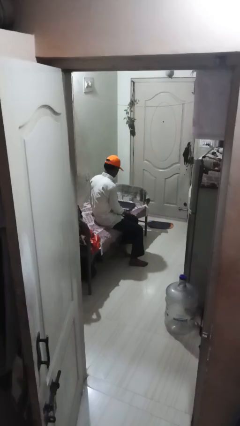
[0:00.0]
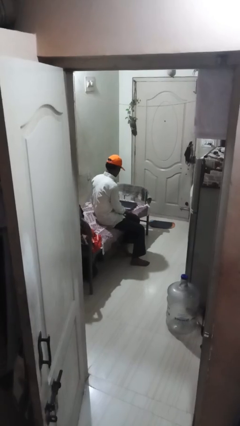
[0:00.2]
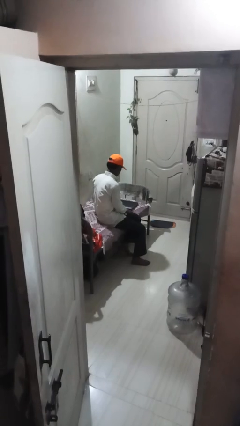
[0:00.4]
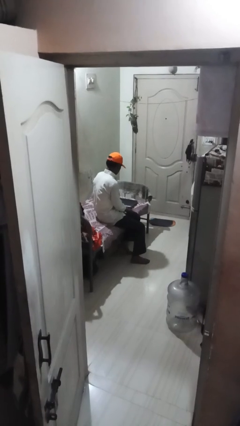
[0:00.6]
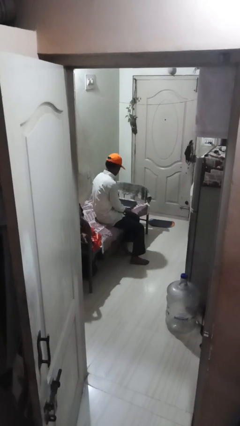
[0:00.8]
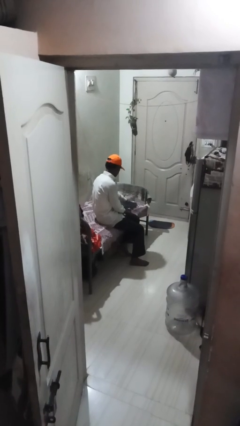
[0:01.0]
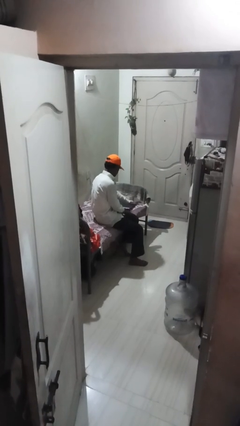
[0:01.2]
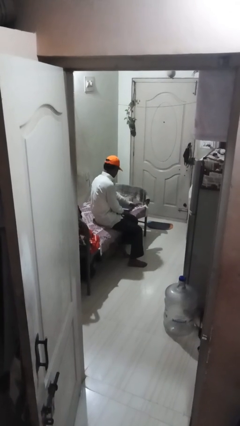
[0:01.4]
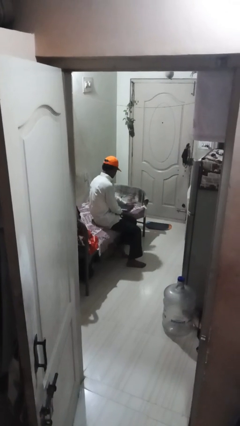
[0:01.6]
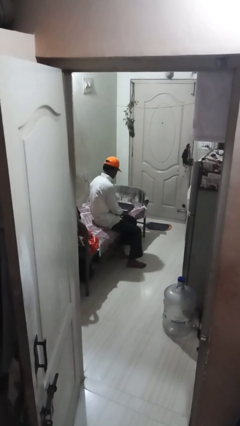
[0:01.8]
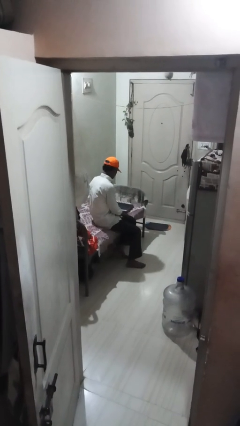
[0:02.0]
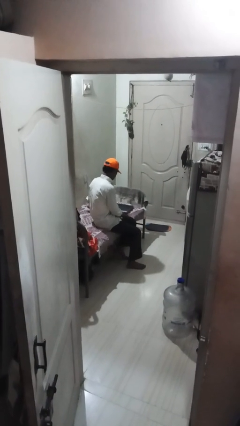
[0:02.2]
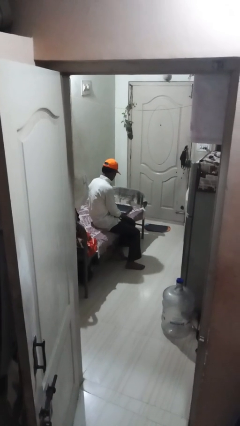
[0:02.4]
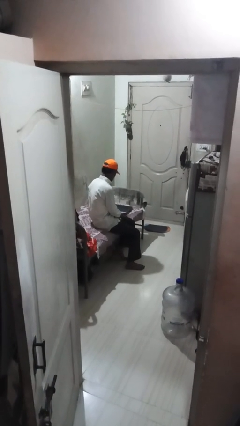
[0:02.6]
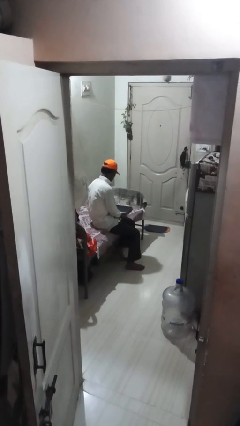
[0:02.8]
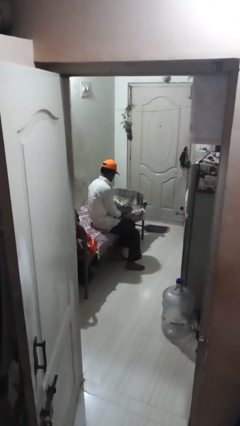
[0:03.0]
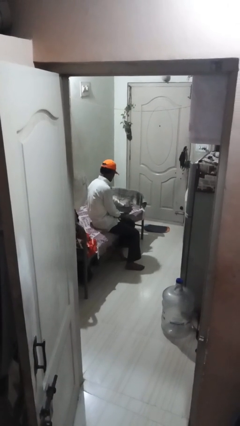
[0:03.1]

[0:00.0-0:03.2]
person waves hand over object

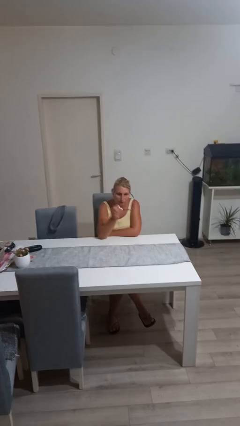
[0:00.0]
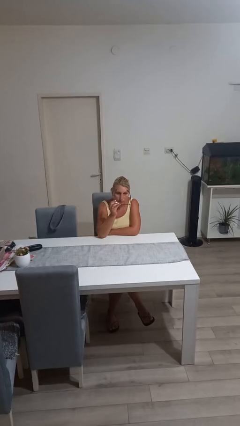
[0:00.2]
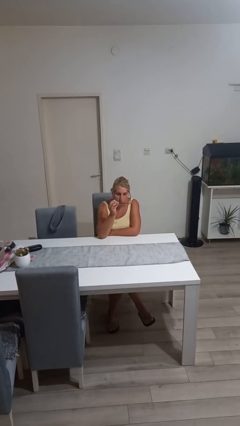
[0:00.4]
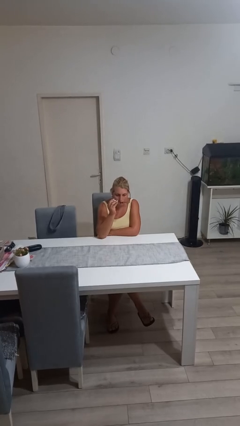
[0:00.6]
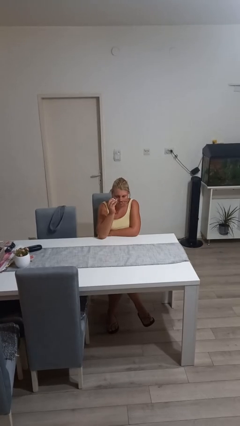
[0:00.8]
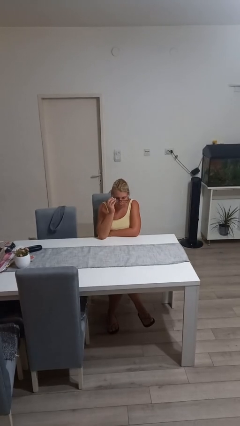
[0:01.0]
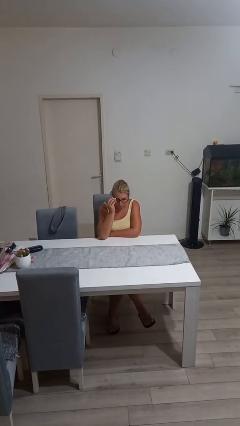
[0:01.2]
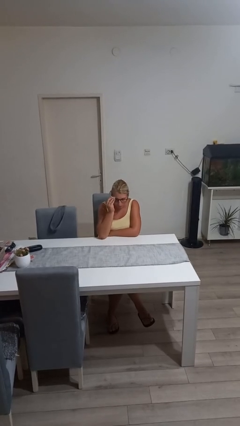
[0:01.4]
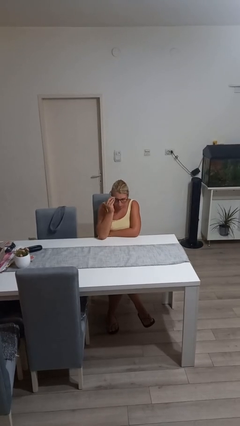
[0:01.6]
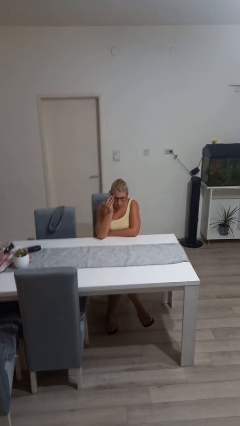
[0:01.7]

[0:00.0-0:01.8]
person puts on glasses

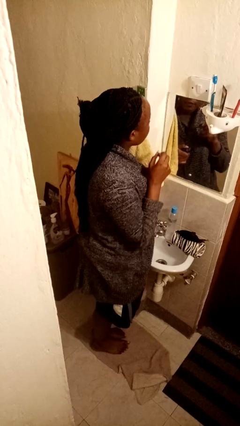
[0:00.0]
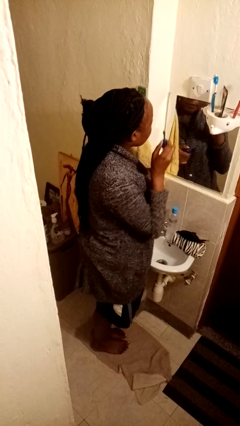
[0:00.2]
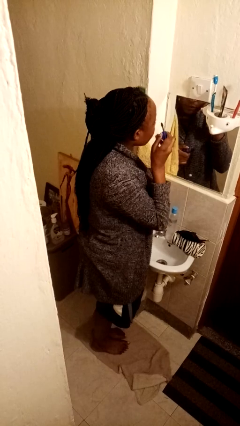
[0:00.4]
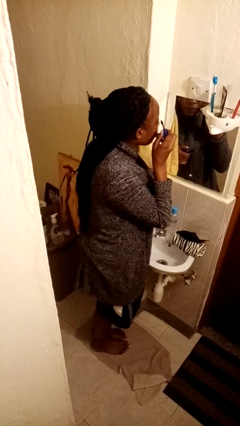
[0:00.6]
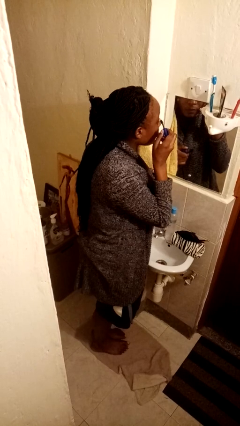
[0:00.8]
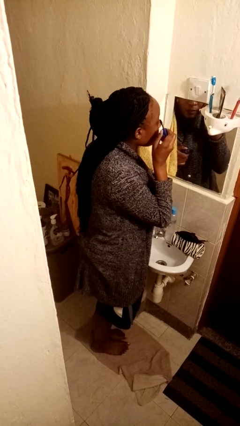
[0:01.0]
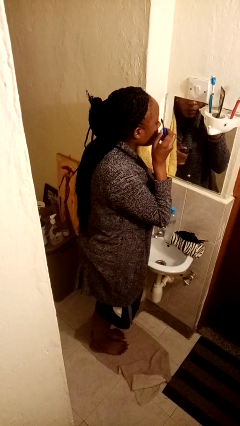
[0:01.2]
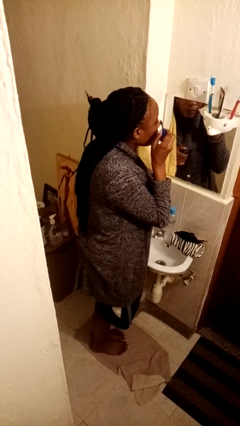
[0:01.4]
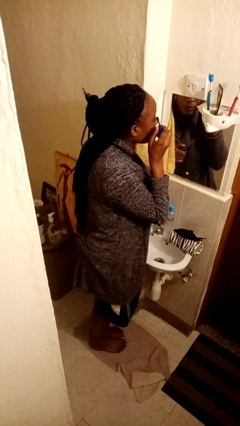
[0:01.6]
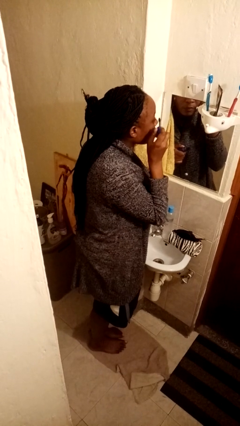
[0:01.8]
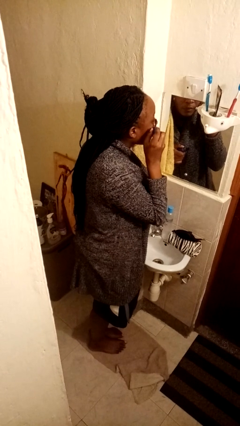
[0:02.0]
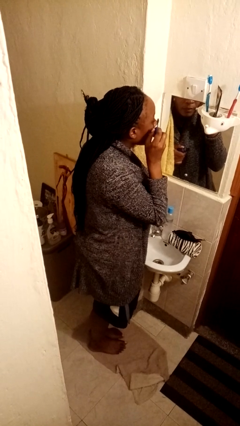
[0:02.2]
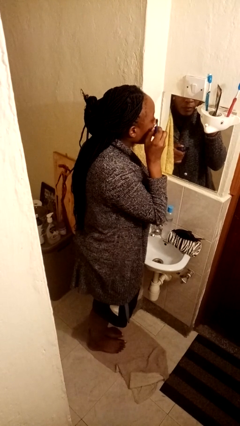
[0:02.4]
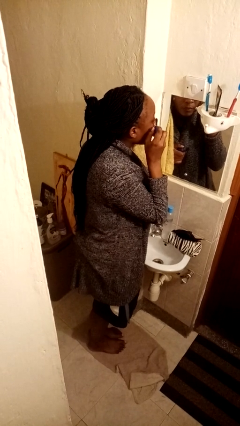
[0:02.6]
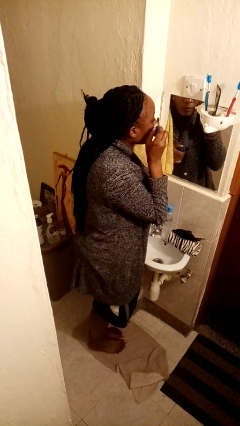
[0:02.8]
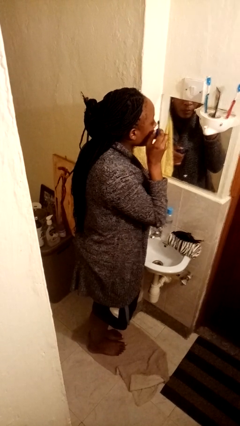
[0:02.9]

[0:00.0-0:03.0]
person applies eye makeup

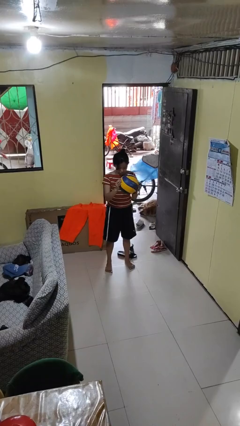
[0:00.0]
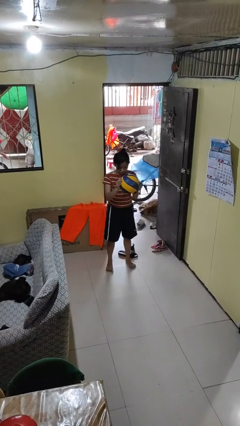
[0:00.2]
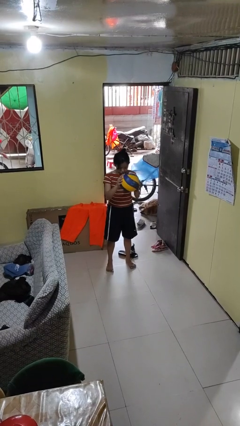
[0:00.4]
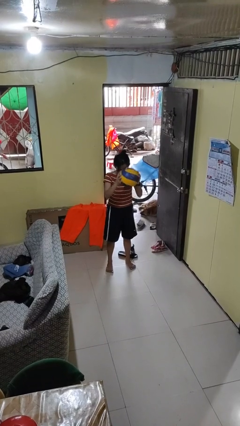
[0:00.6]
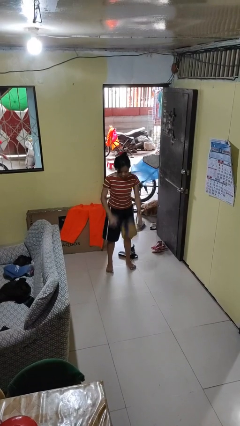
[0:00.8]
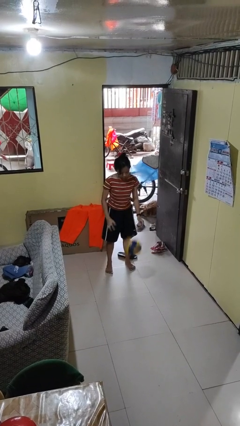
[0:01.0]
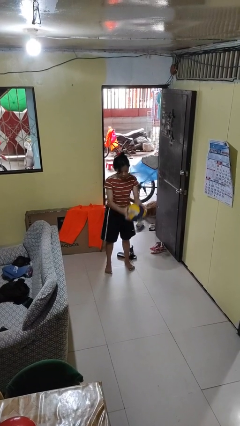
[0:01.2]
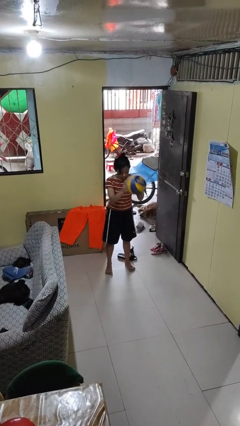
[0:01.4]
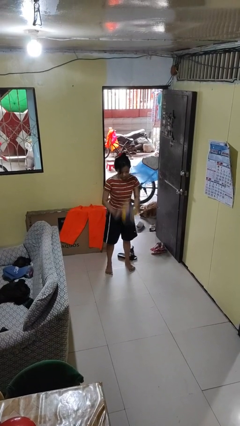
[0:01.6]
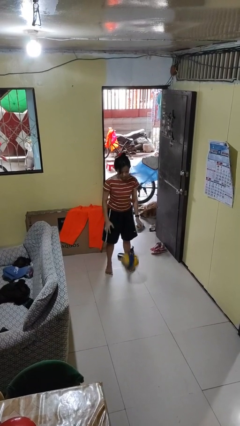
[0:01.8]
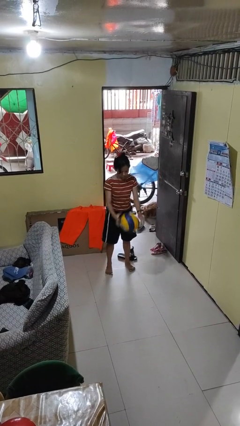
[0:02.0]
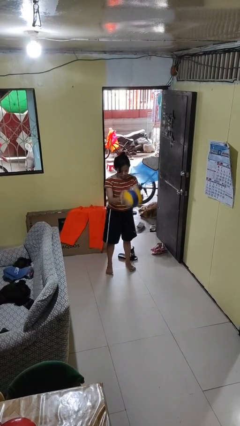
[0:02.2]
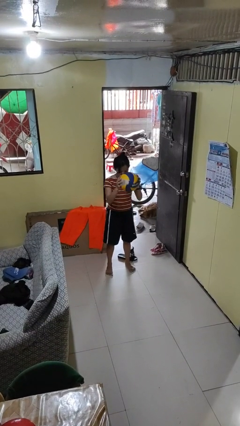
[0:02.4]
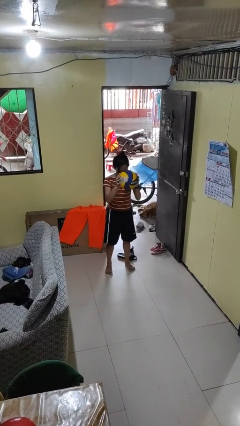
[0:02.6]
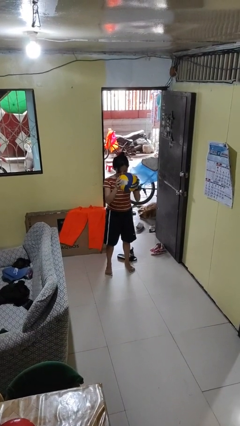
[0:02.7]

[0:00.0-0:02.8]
person bounces ball on floor

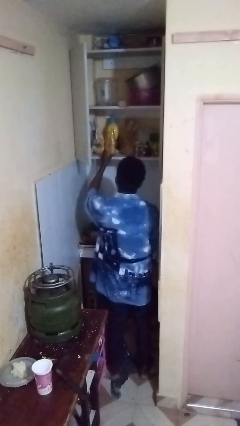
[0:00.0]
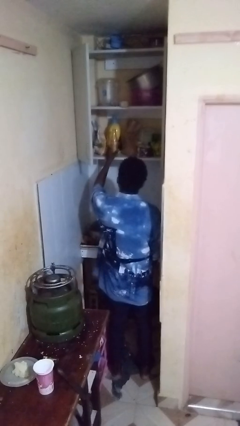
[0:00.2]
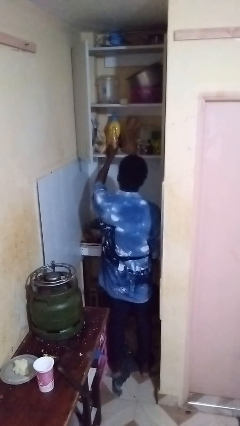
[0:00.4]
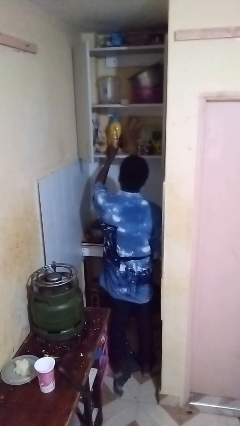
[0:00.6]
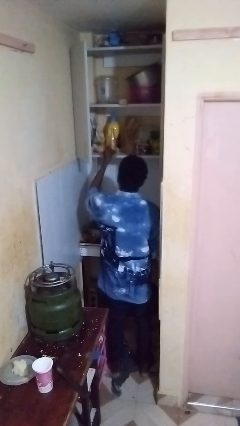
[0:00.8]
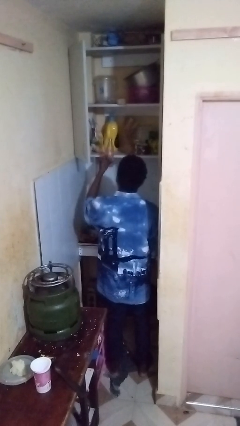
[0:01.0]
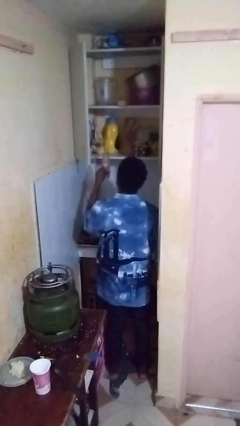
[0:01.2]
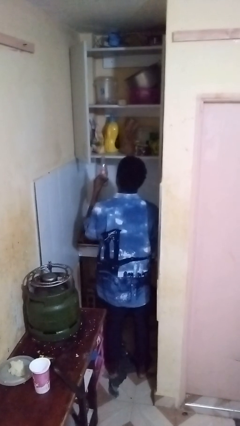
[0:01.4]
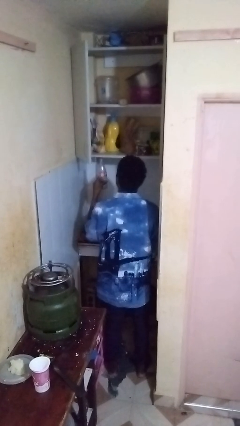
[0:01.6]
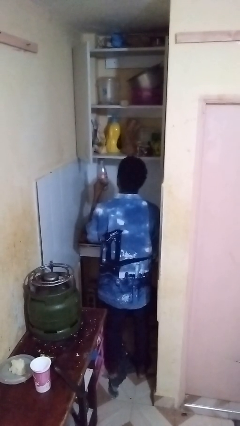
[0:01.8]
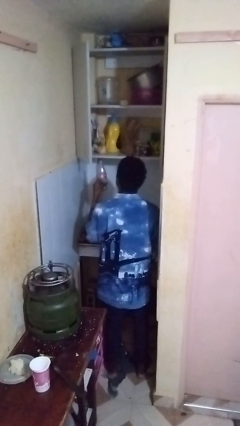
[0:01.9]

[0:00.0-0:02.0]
person picks up object from cabinet

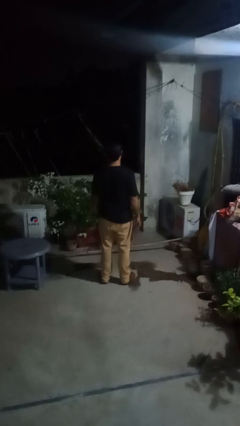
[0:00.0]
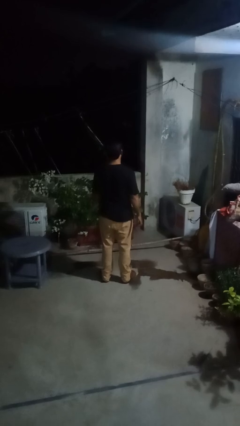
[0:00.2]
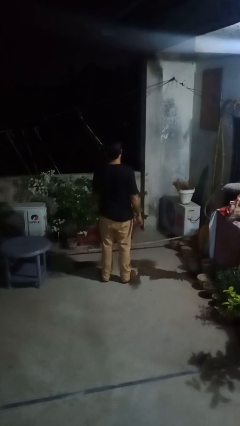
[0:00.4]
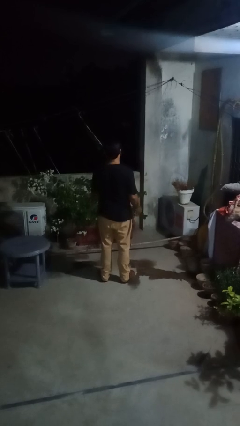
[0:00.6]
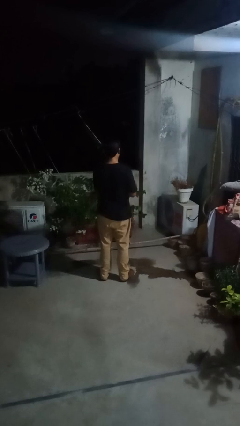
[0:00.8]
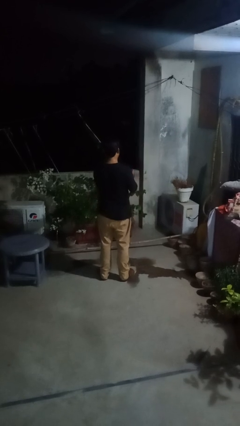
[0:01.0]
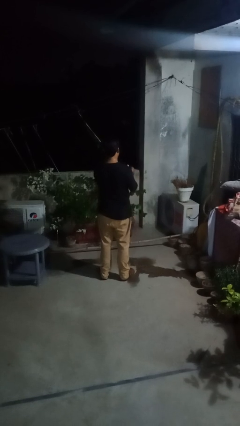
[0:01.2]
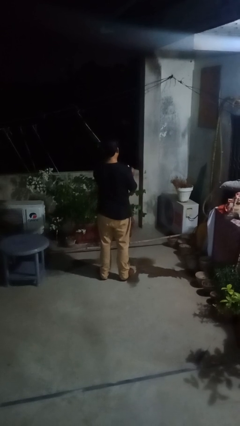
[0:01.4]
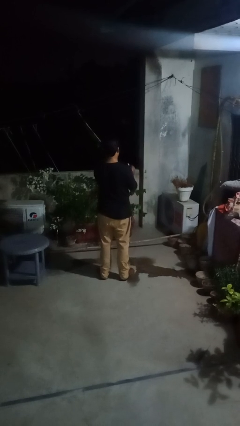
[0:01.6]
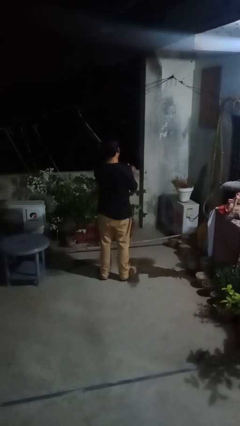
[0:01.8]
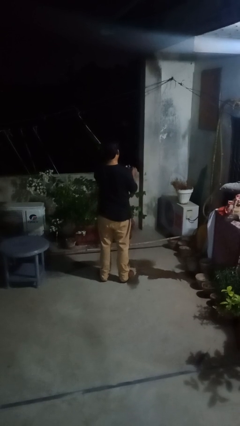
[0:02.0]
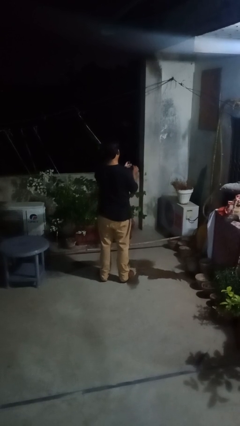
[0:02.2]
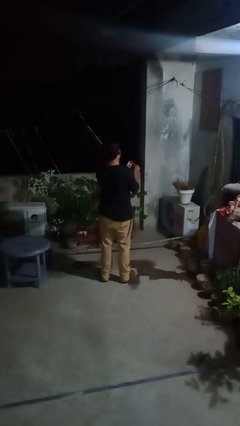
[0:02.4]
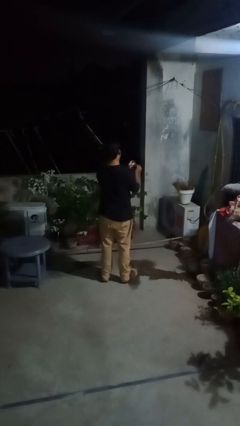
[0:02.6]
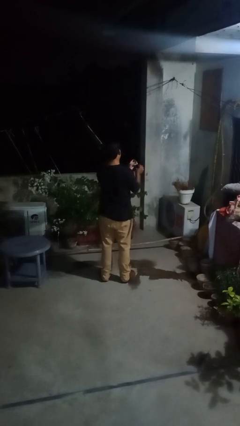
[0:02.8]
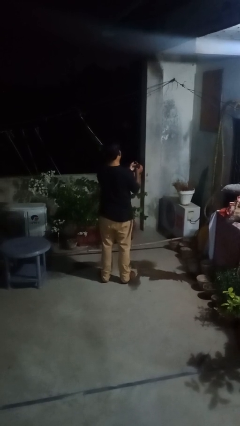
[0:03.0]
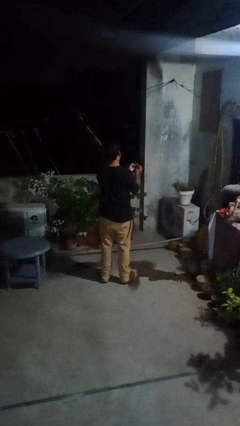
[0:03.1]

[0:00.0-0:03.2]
person files fingernails

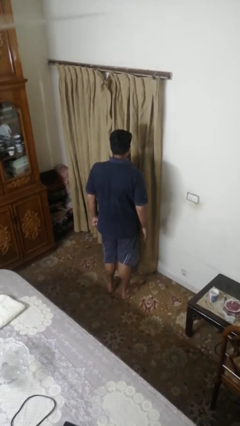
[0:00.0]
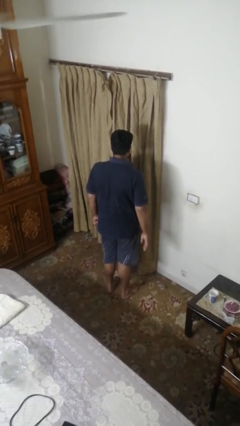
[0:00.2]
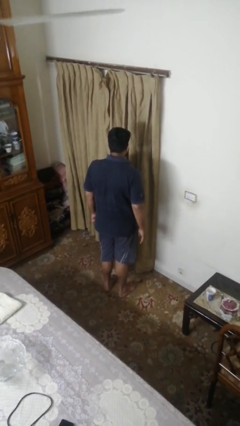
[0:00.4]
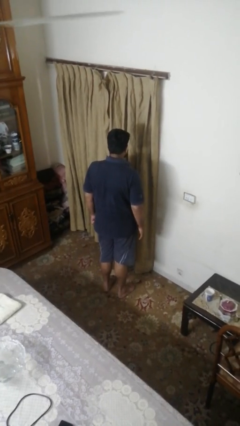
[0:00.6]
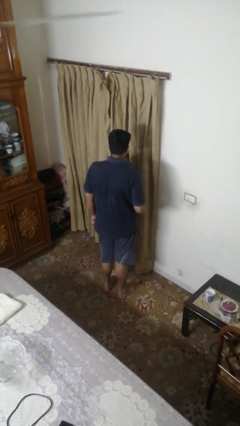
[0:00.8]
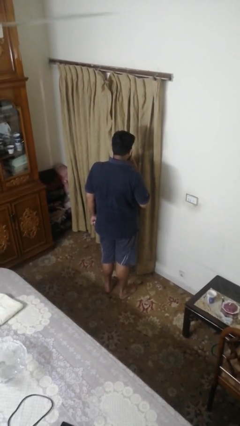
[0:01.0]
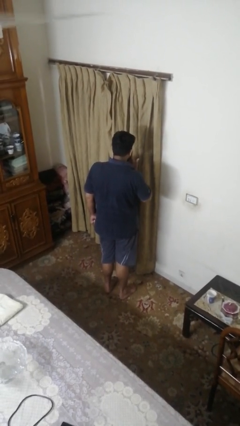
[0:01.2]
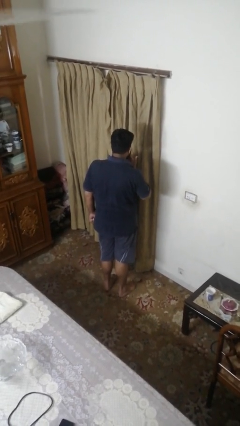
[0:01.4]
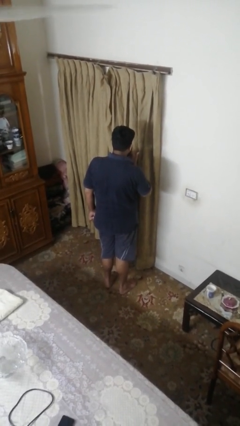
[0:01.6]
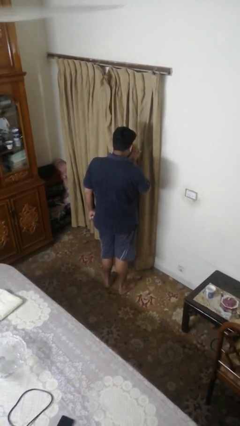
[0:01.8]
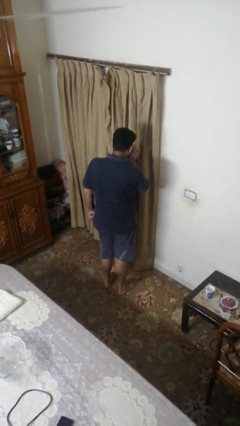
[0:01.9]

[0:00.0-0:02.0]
person gestures blow kiss
